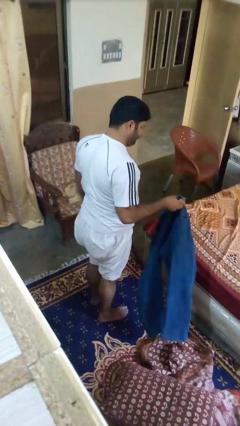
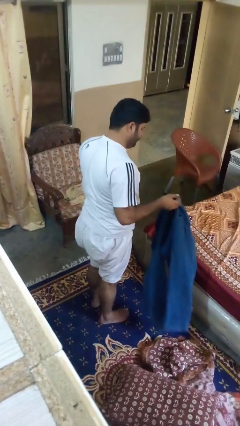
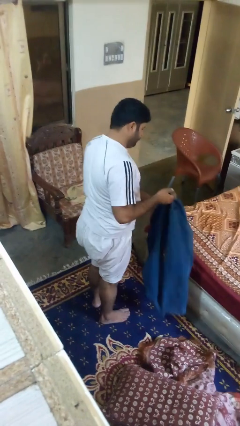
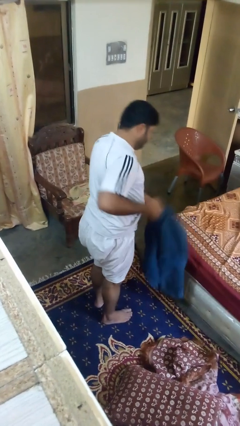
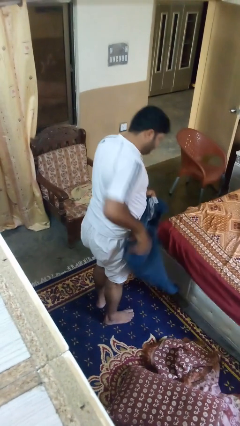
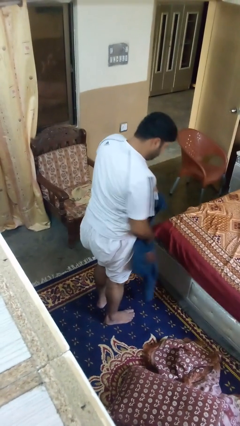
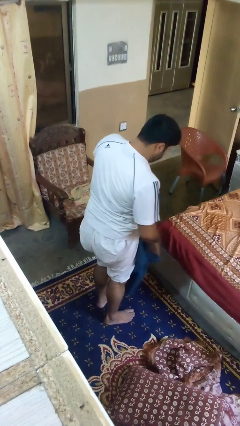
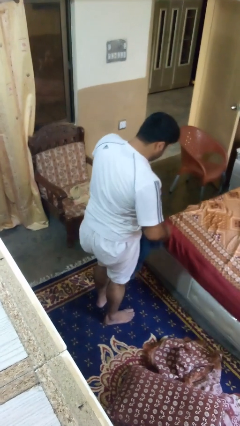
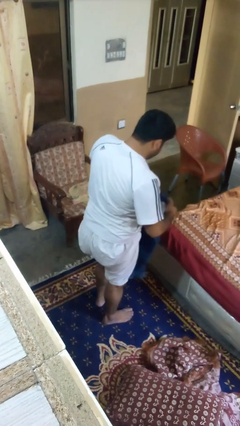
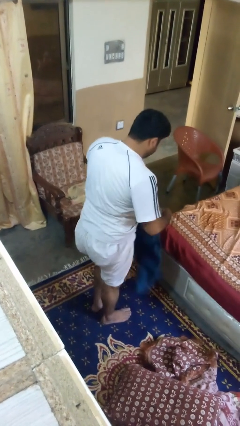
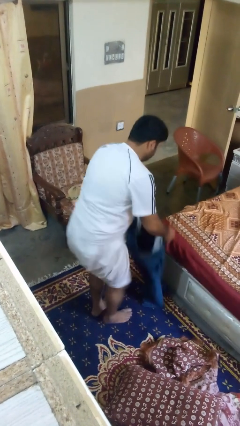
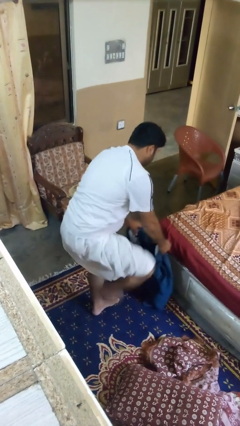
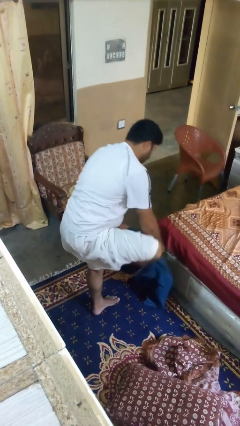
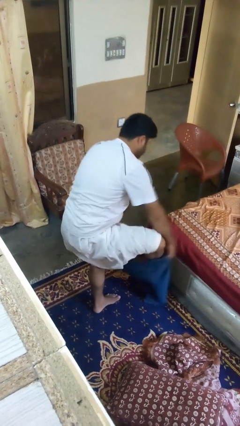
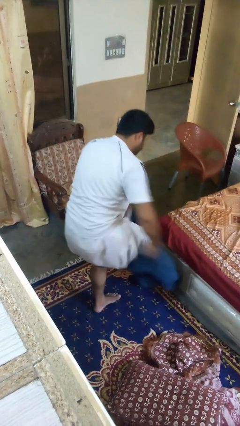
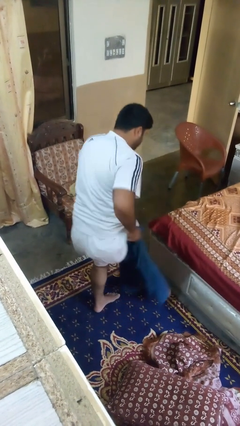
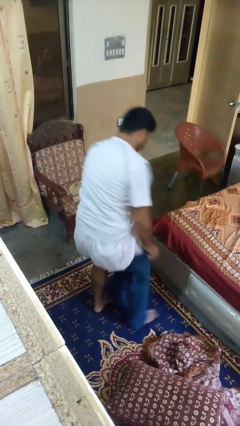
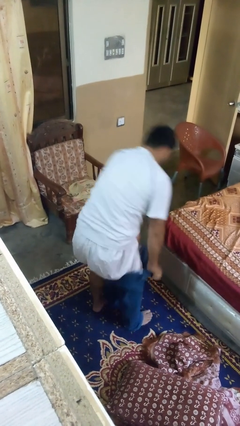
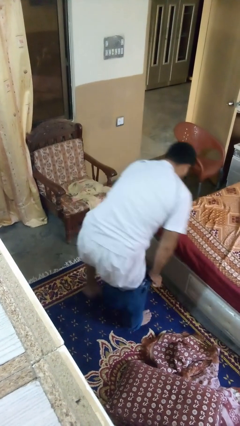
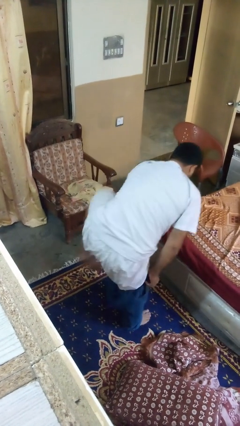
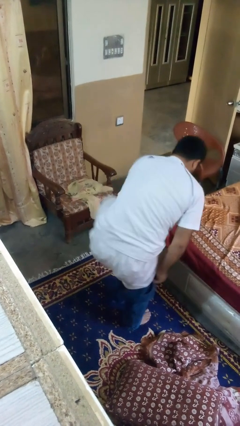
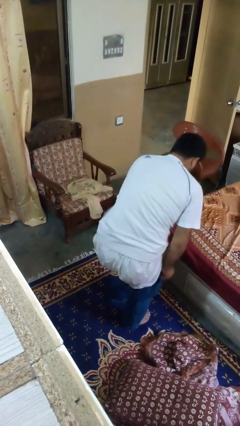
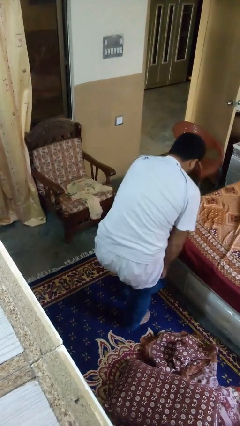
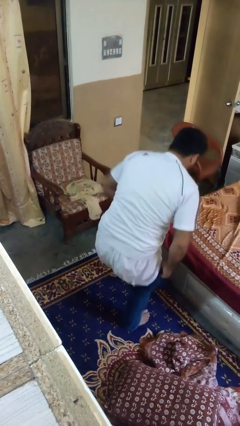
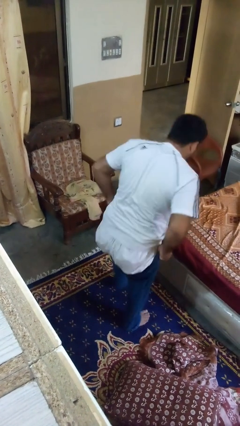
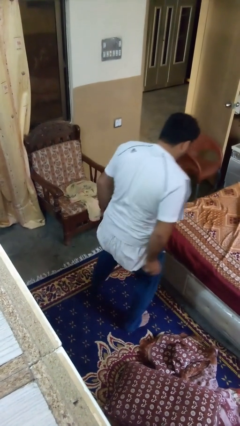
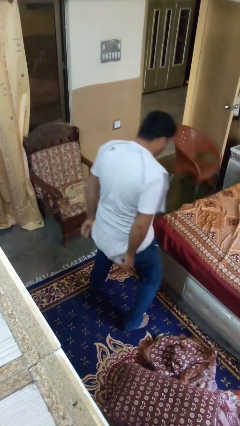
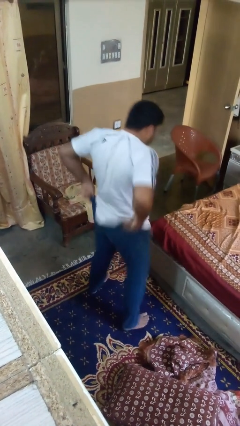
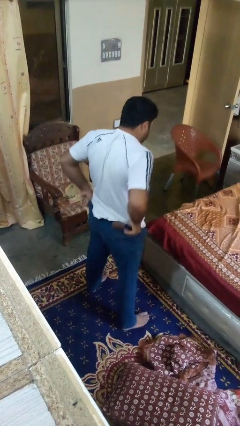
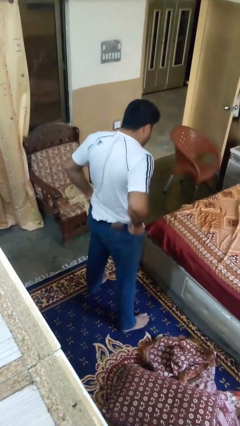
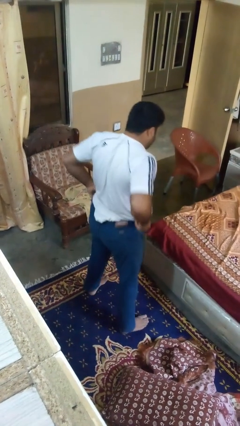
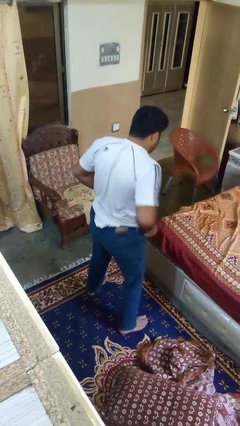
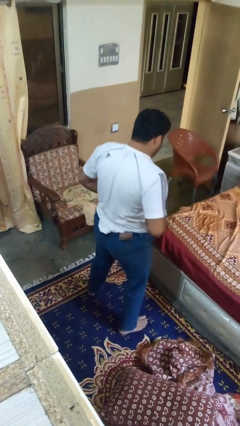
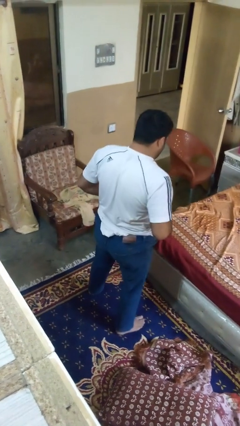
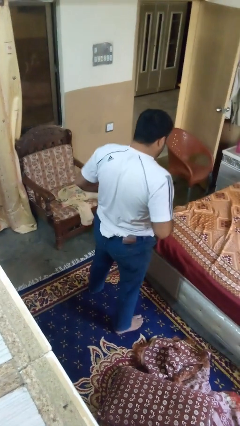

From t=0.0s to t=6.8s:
person puts on pants

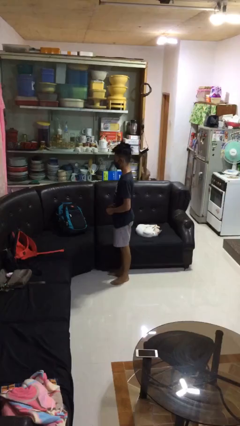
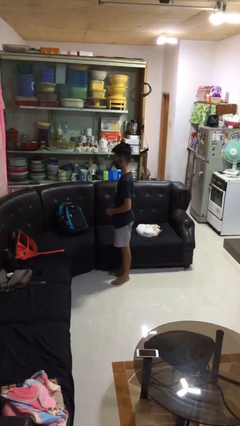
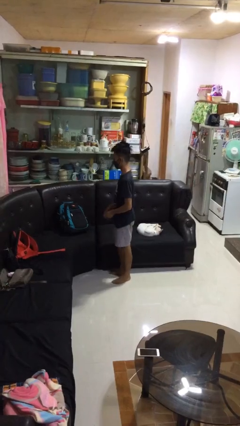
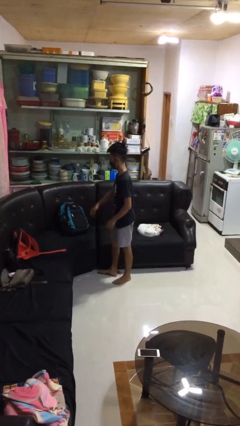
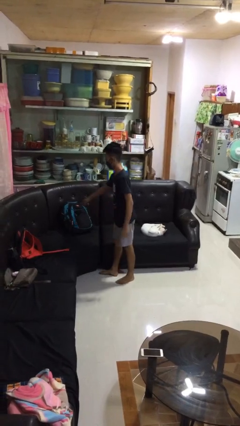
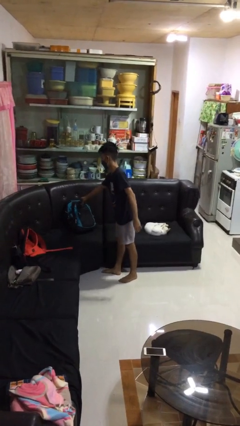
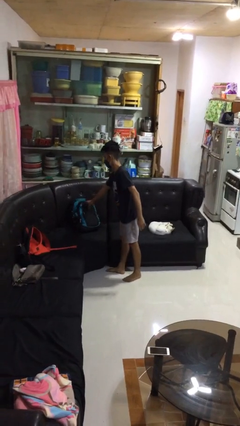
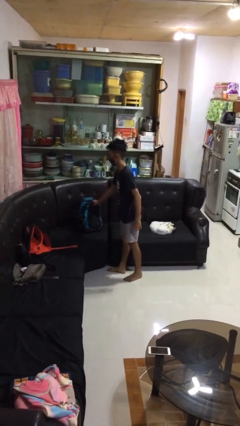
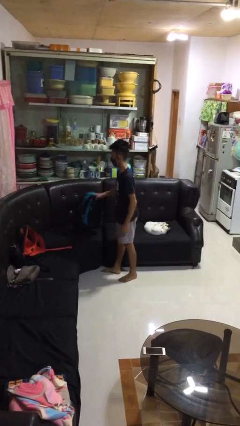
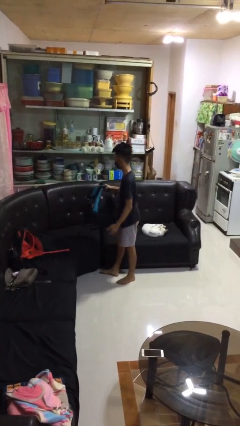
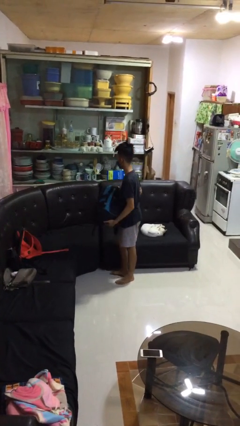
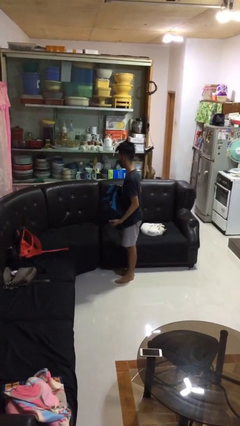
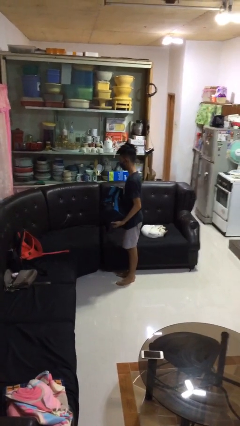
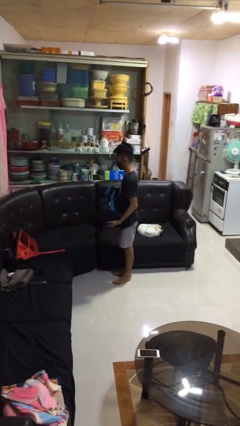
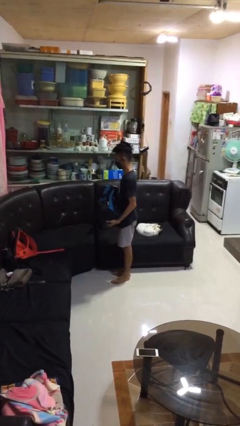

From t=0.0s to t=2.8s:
person picks up object from couch

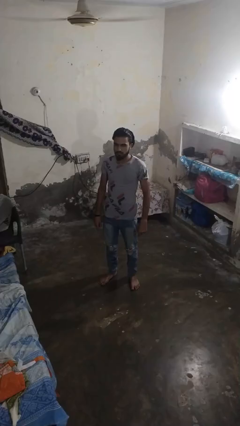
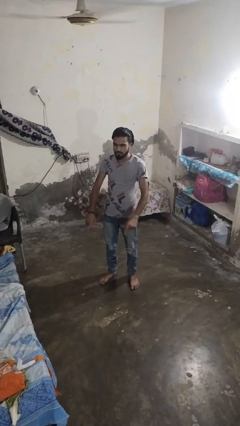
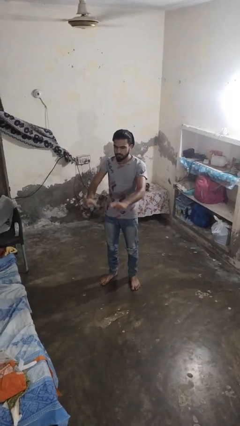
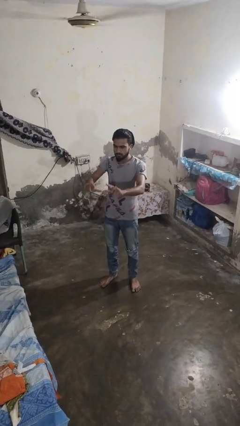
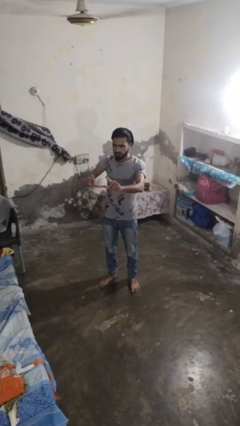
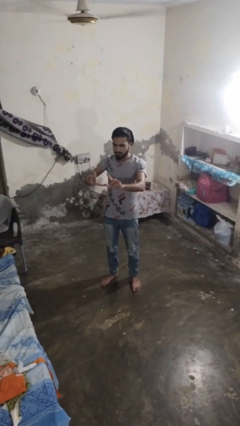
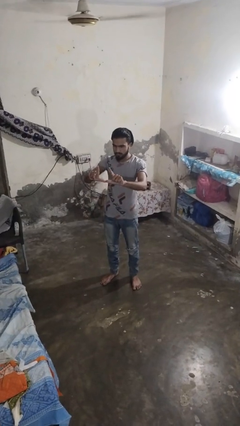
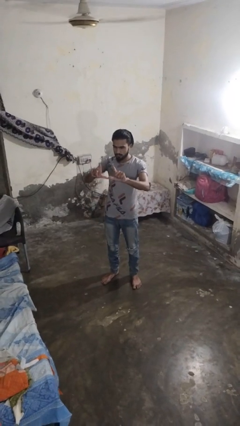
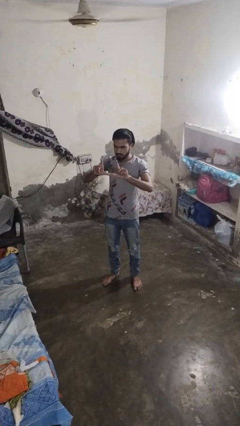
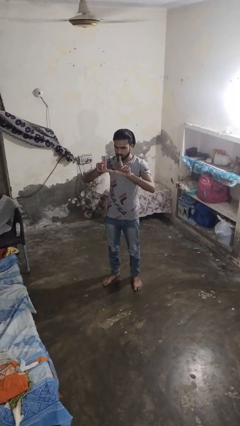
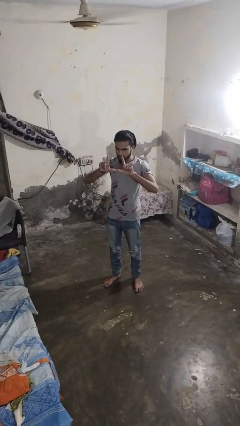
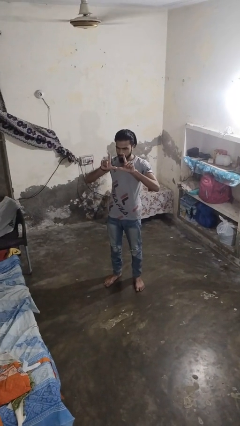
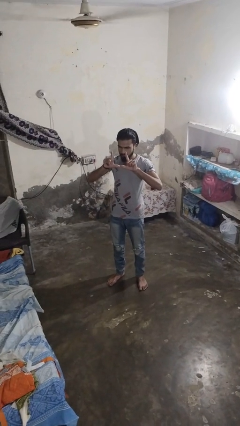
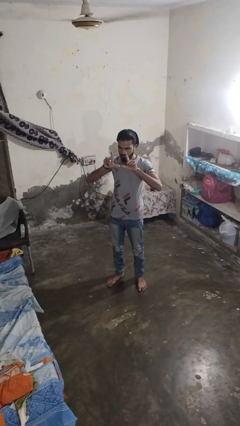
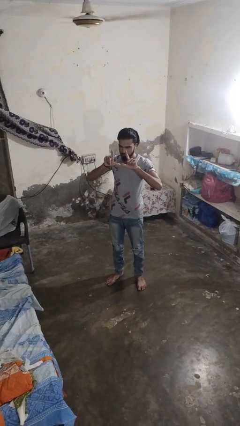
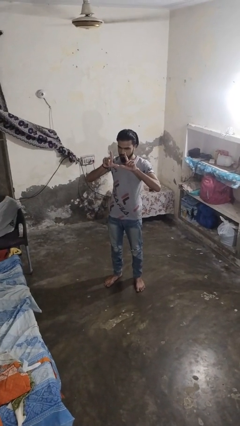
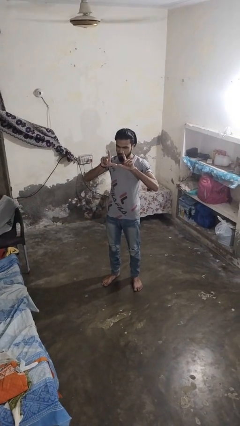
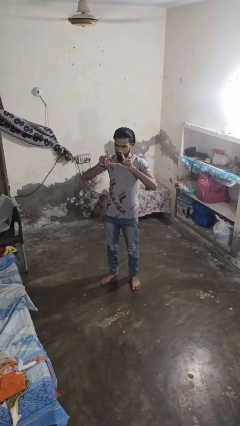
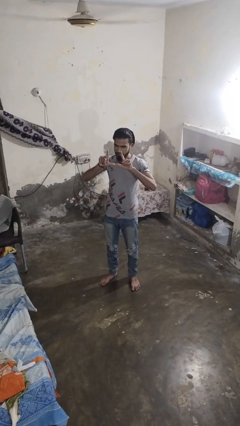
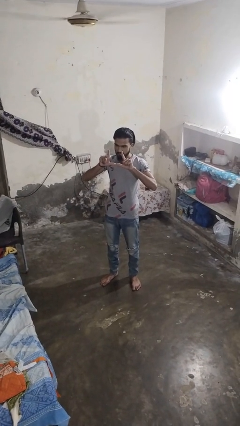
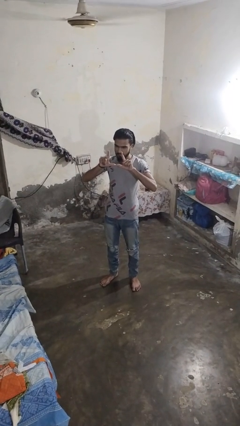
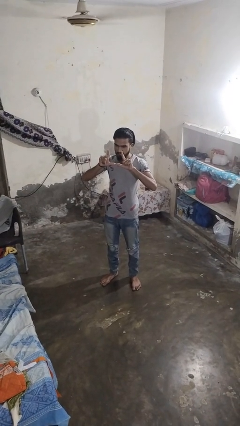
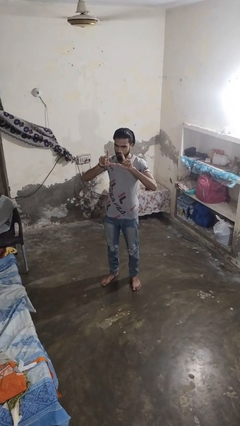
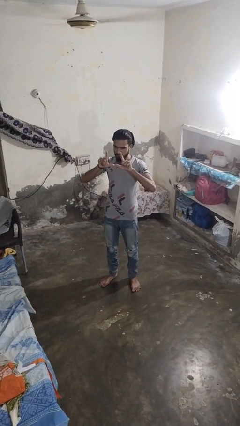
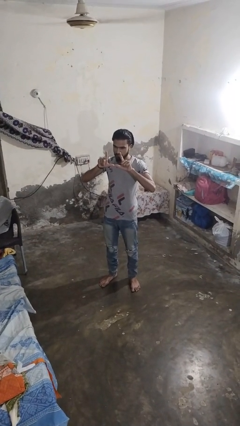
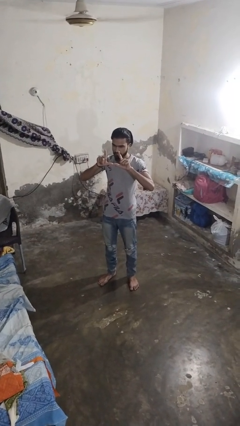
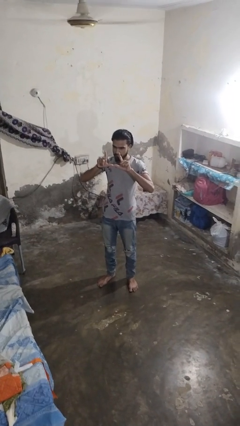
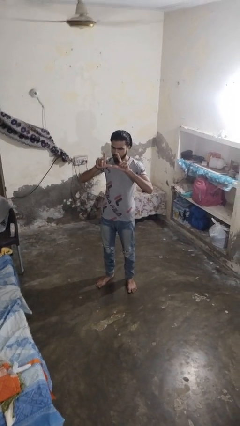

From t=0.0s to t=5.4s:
person gestures zoom in

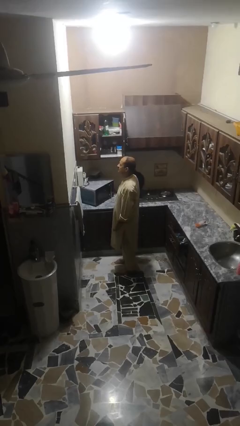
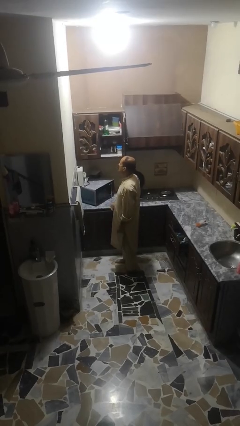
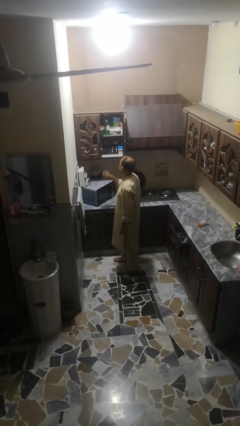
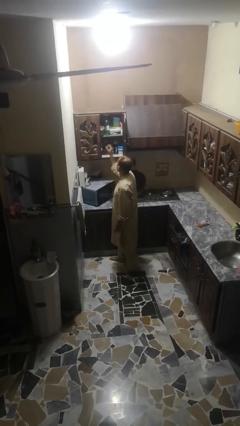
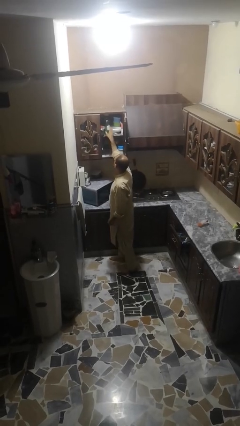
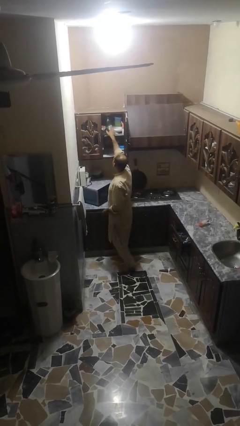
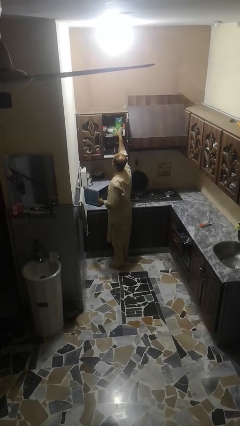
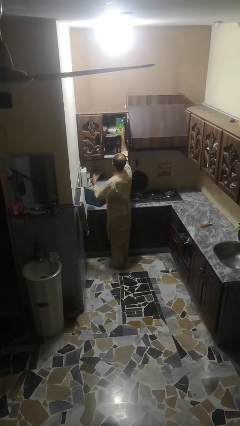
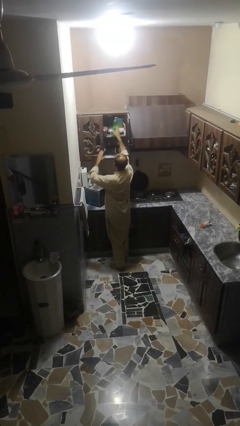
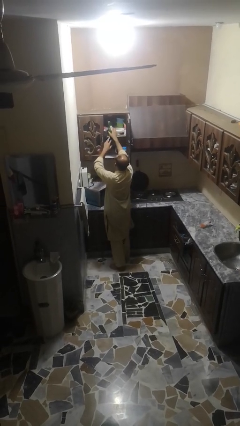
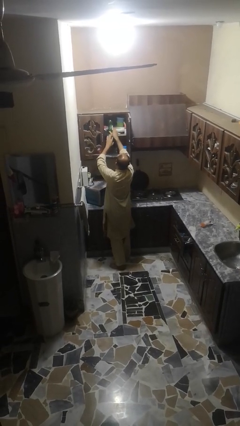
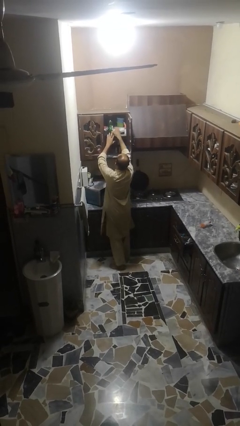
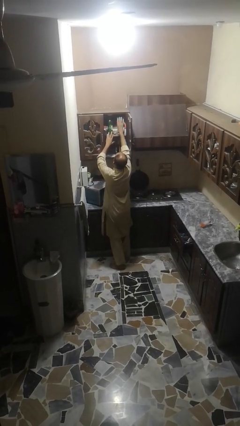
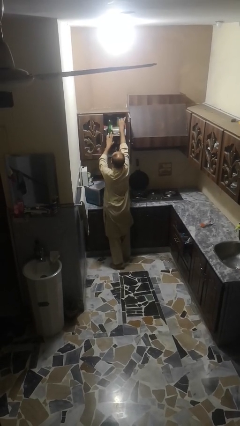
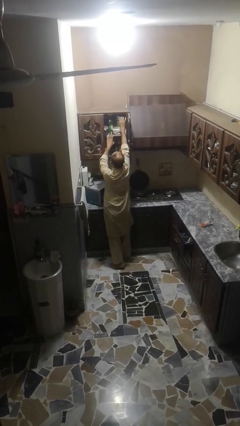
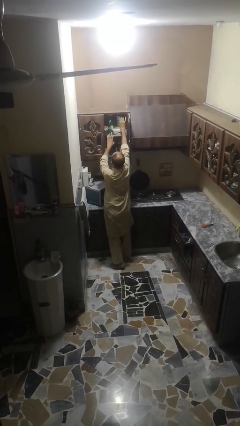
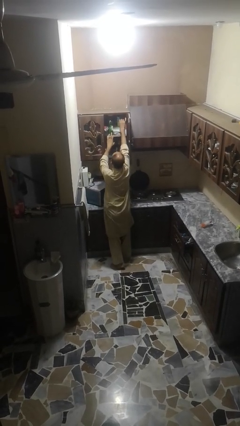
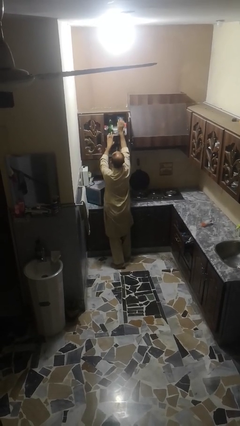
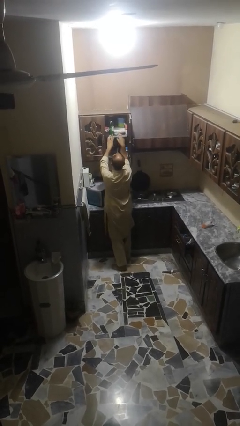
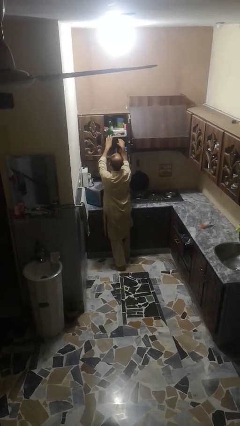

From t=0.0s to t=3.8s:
person searches in cabinet
